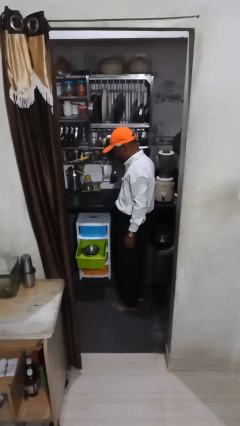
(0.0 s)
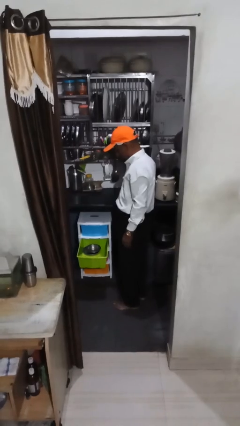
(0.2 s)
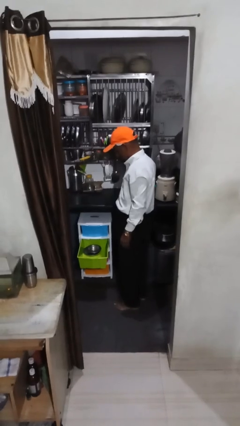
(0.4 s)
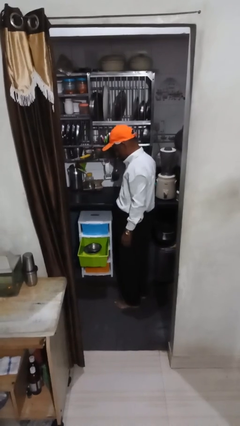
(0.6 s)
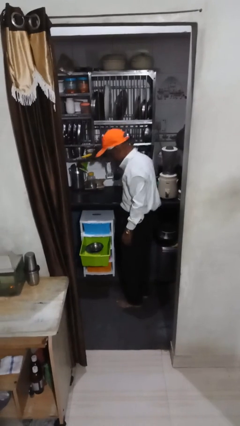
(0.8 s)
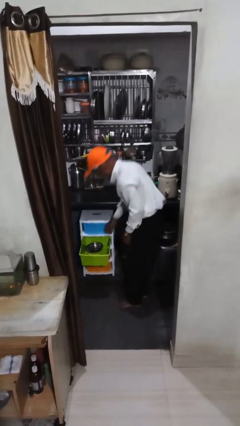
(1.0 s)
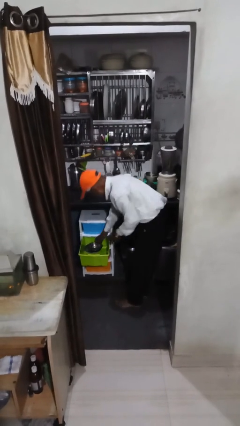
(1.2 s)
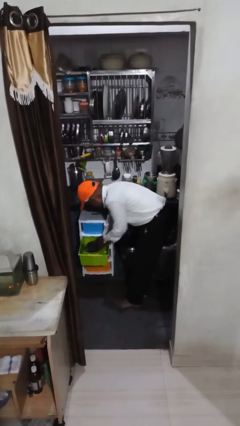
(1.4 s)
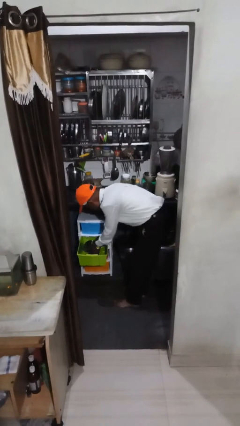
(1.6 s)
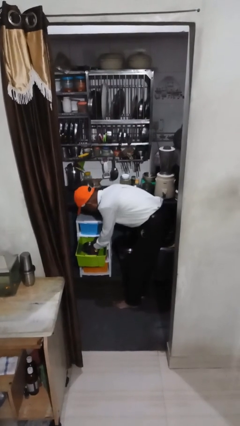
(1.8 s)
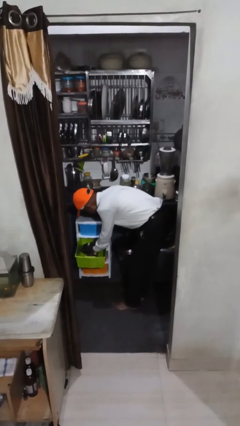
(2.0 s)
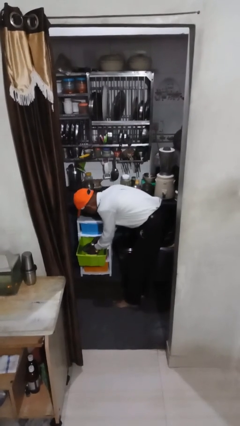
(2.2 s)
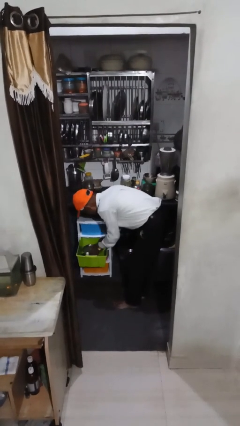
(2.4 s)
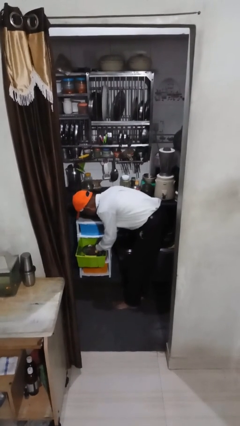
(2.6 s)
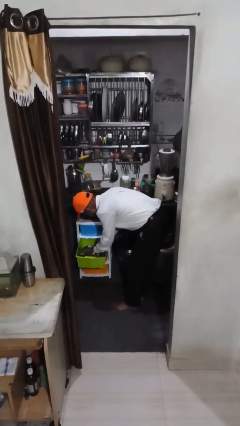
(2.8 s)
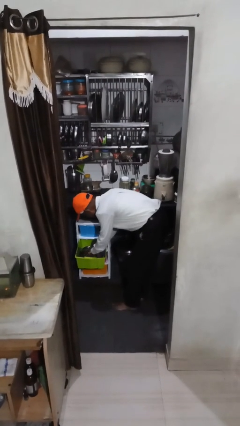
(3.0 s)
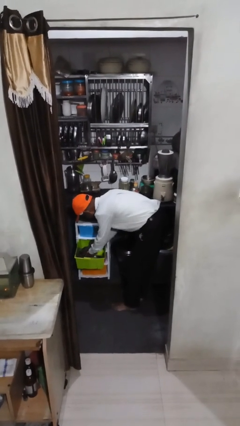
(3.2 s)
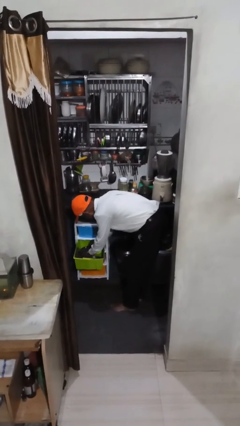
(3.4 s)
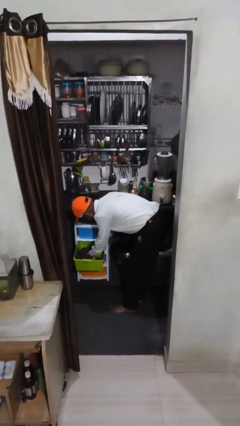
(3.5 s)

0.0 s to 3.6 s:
person searches in kitchen drawer

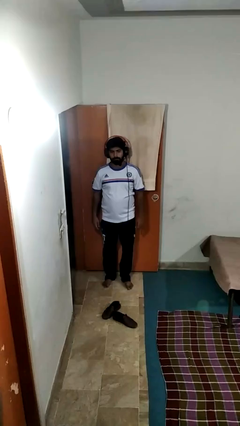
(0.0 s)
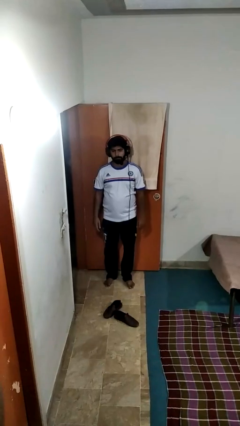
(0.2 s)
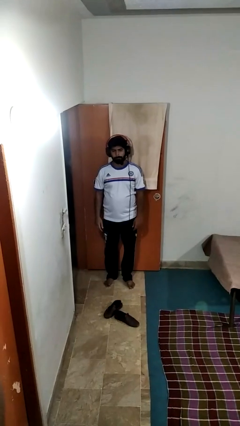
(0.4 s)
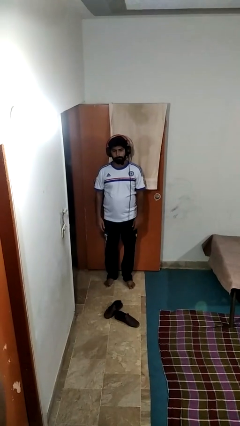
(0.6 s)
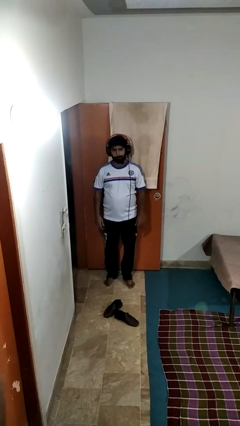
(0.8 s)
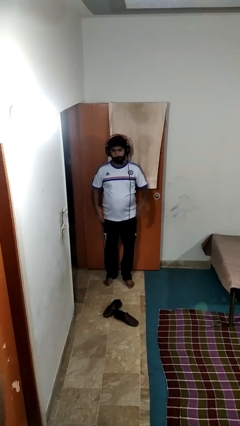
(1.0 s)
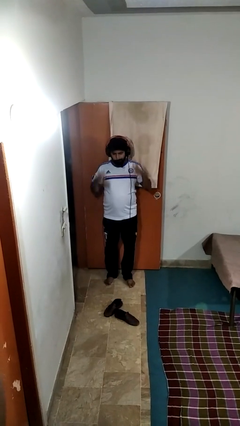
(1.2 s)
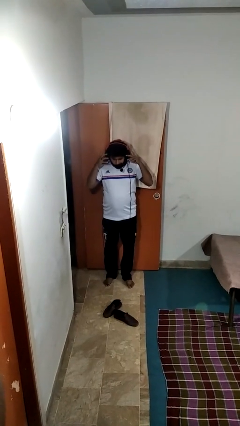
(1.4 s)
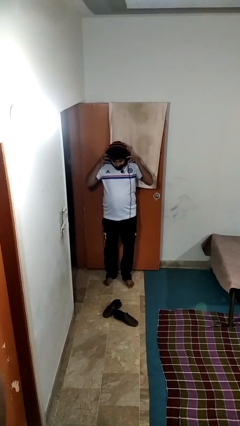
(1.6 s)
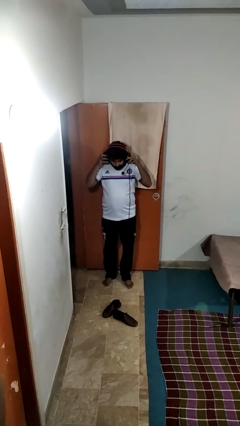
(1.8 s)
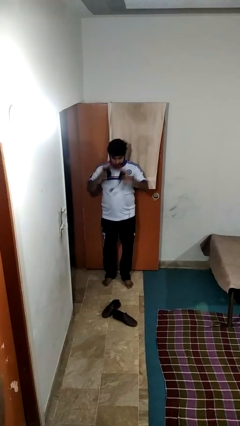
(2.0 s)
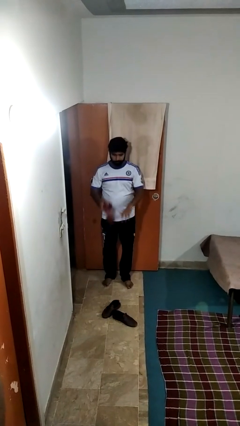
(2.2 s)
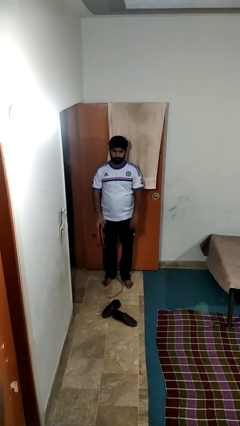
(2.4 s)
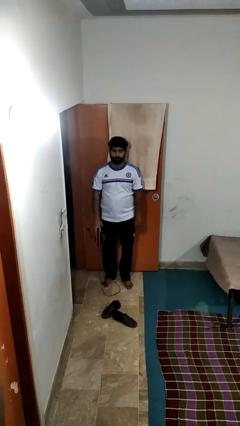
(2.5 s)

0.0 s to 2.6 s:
person takes off headphones

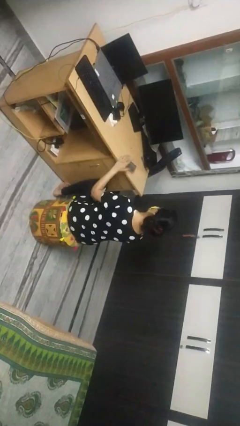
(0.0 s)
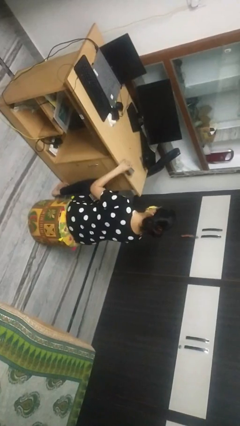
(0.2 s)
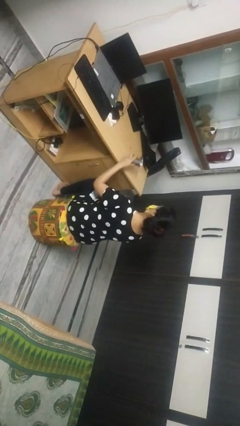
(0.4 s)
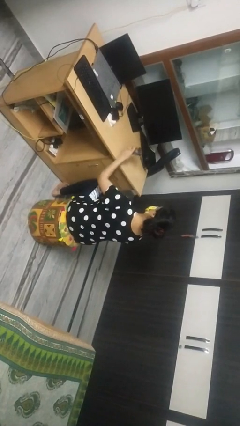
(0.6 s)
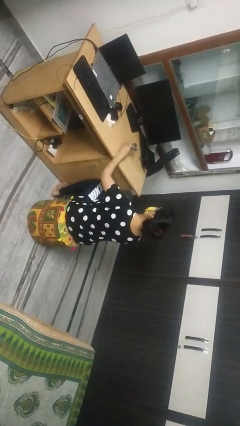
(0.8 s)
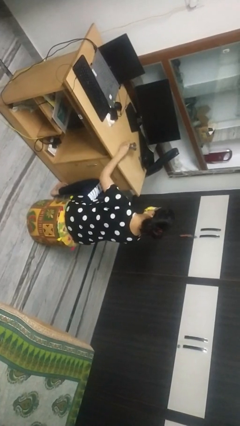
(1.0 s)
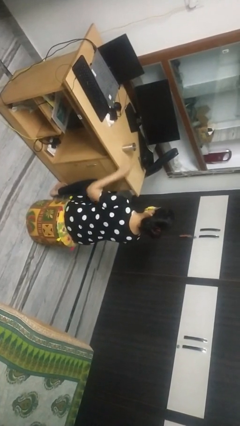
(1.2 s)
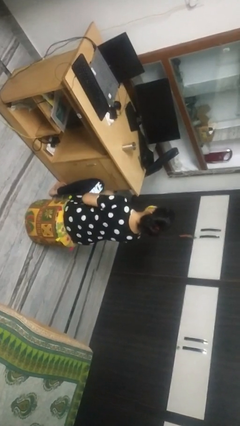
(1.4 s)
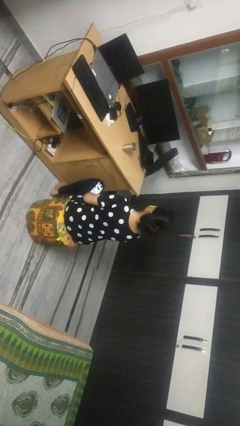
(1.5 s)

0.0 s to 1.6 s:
person sets upright glass

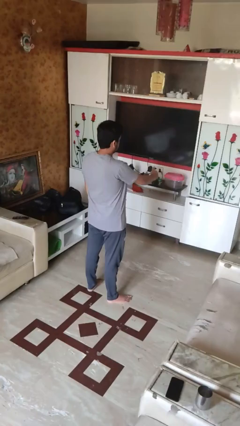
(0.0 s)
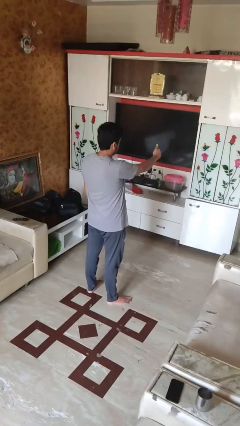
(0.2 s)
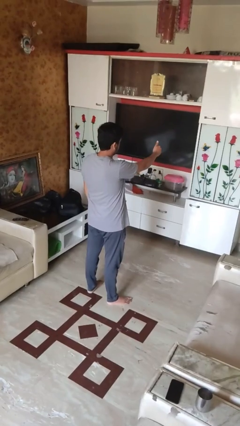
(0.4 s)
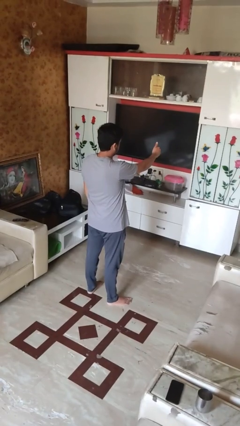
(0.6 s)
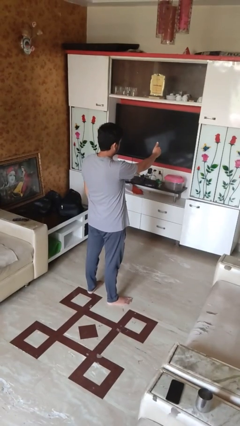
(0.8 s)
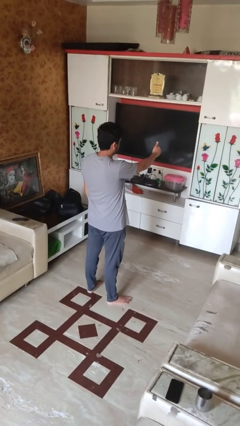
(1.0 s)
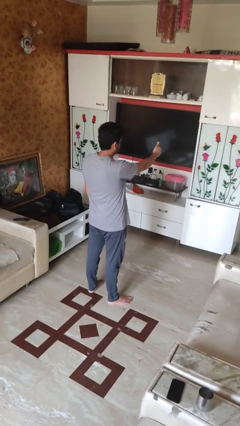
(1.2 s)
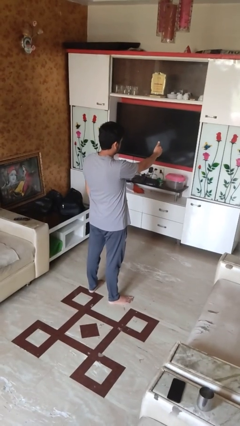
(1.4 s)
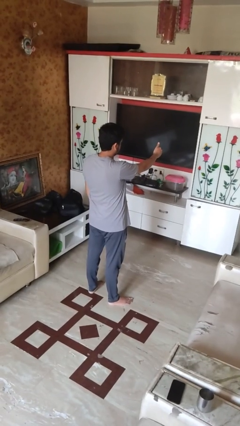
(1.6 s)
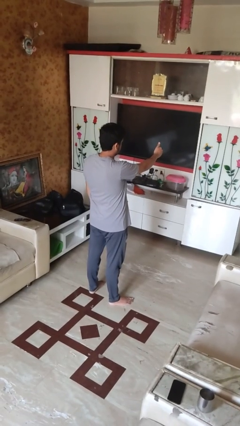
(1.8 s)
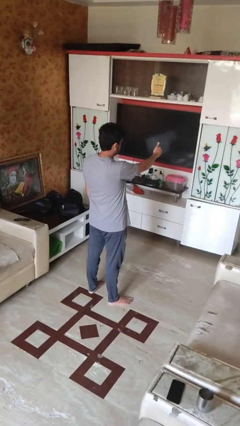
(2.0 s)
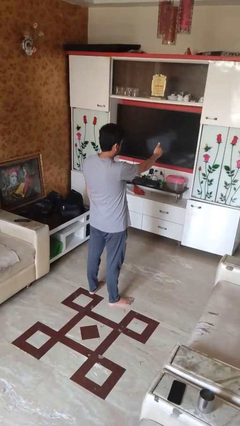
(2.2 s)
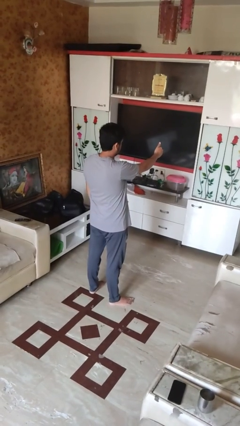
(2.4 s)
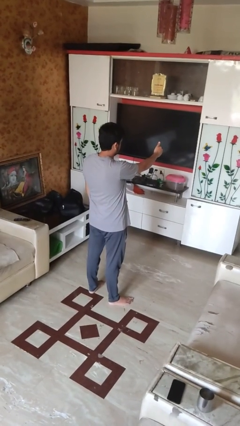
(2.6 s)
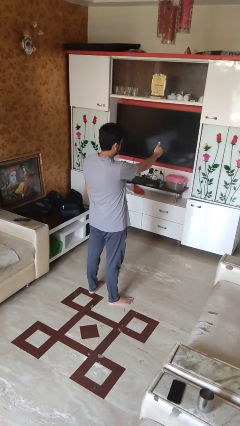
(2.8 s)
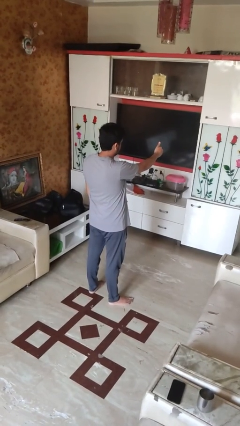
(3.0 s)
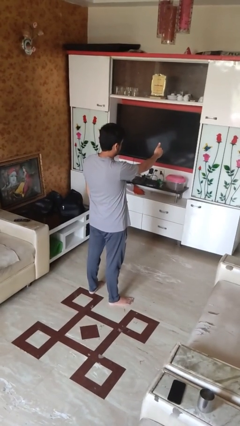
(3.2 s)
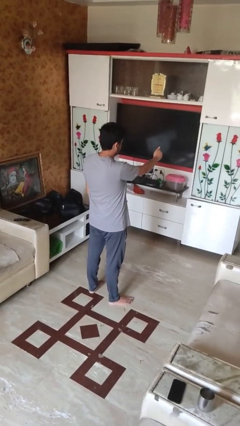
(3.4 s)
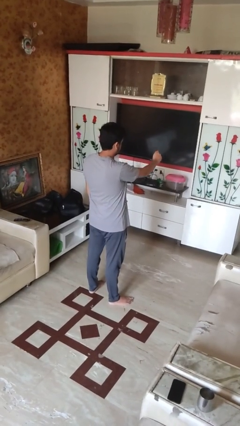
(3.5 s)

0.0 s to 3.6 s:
person gestures thumbs up

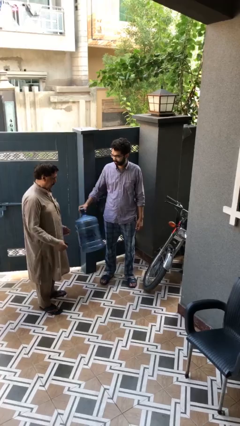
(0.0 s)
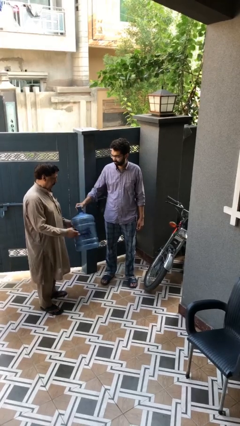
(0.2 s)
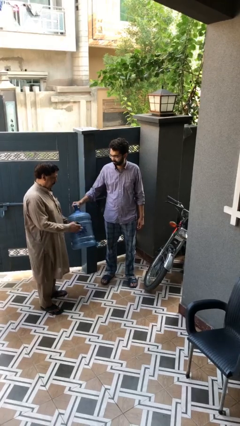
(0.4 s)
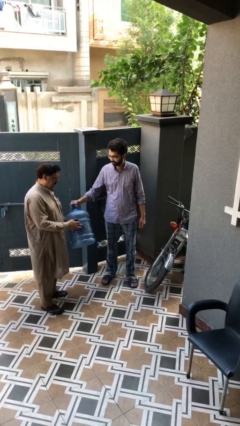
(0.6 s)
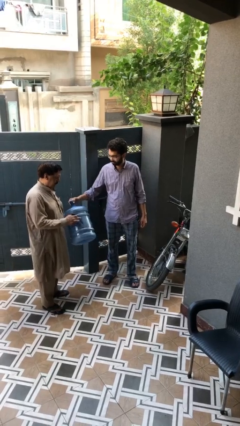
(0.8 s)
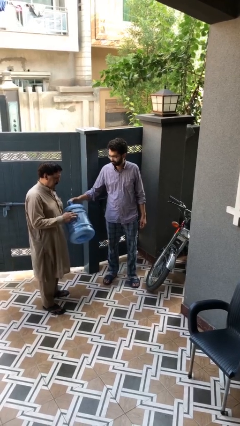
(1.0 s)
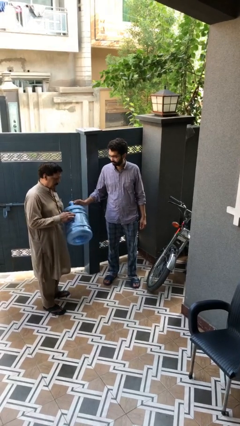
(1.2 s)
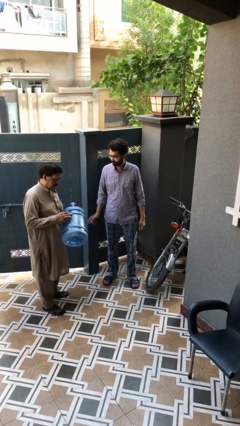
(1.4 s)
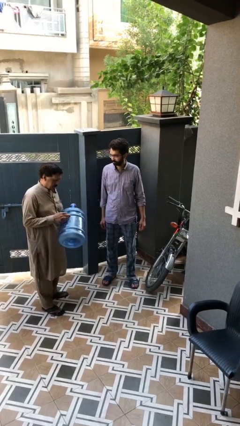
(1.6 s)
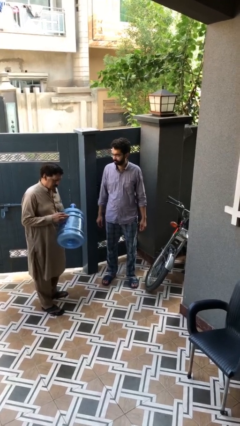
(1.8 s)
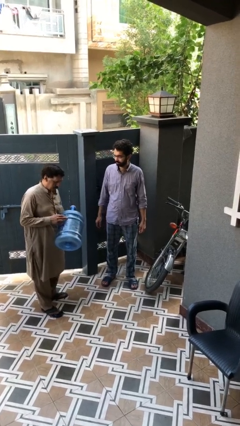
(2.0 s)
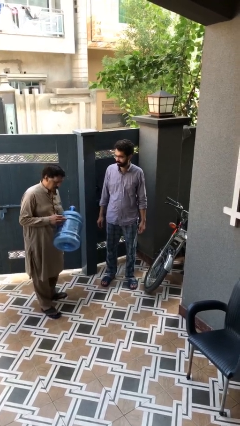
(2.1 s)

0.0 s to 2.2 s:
person transfers object to person

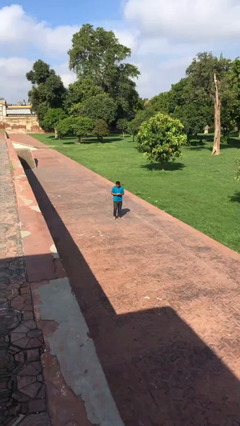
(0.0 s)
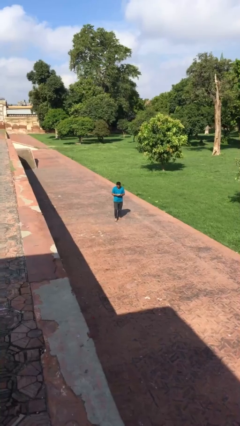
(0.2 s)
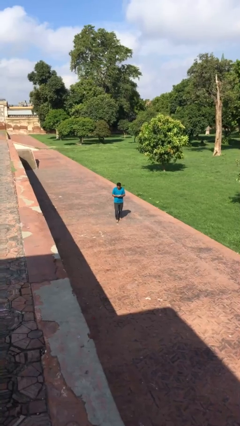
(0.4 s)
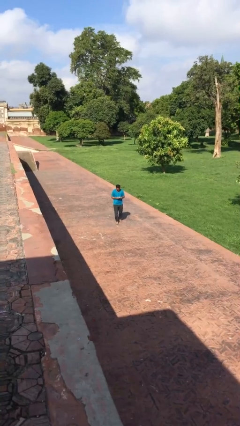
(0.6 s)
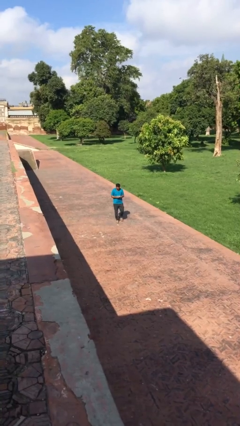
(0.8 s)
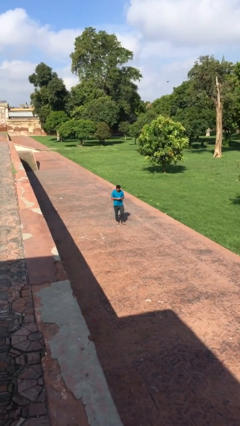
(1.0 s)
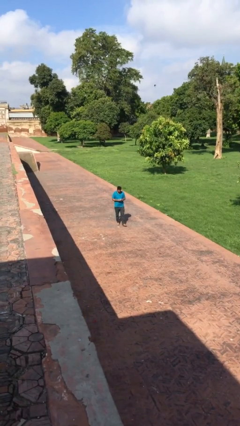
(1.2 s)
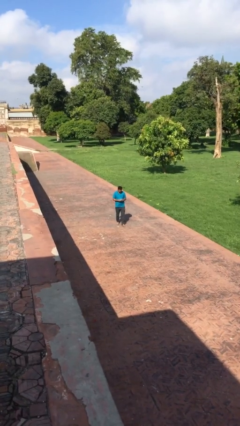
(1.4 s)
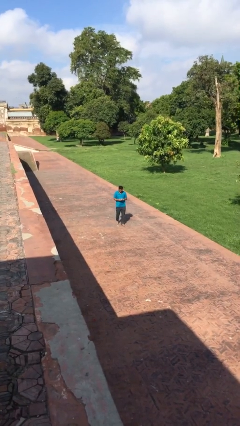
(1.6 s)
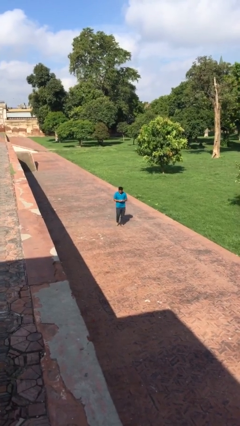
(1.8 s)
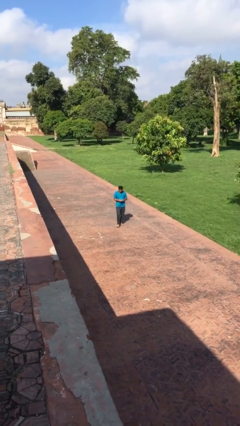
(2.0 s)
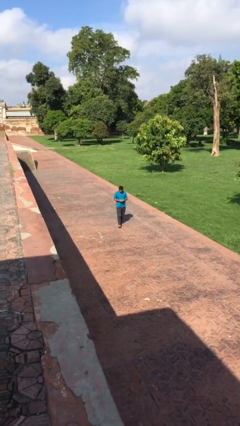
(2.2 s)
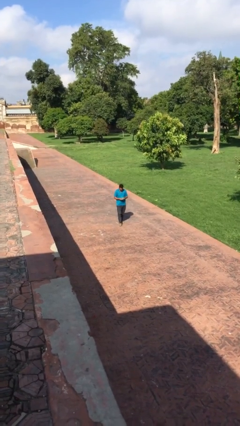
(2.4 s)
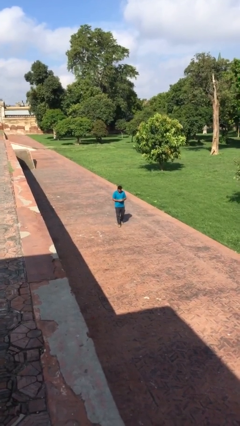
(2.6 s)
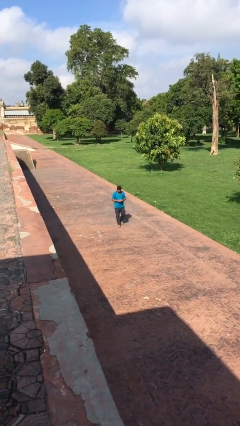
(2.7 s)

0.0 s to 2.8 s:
person texts on phone

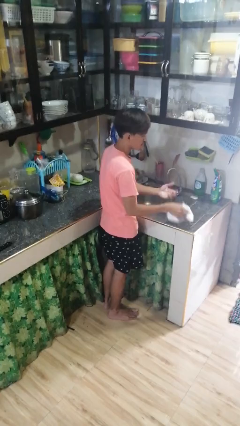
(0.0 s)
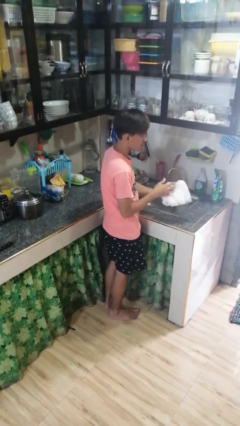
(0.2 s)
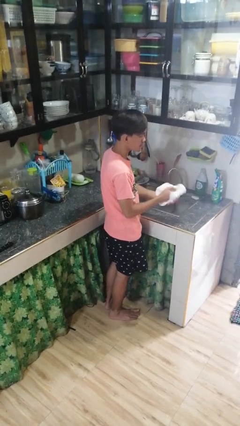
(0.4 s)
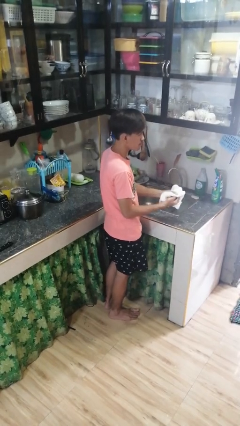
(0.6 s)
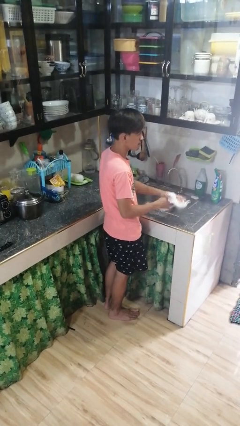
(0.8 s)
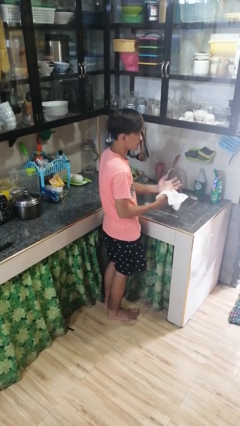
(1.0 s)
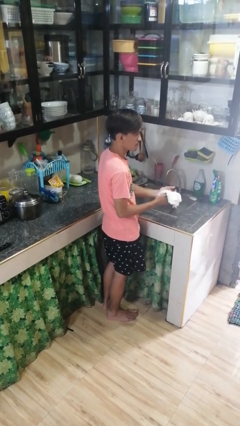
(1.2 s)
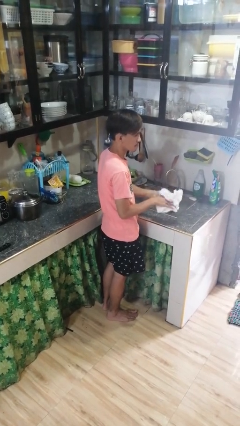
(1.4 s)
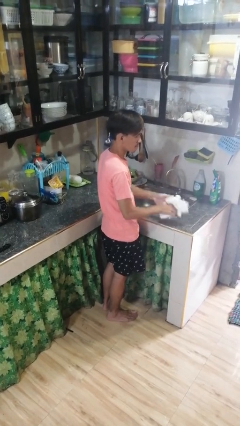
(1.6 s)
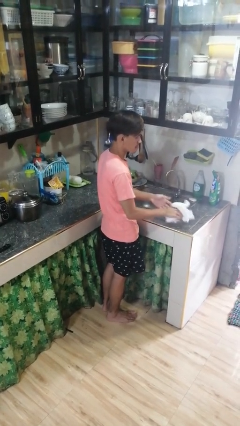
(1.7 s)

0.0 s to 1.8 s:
person dries hands with towel
